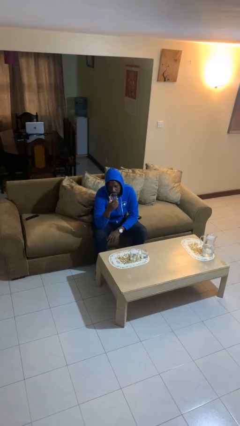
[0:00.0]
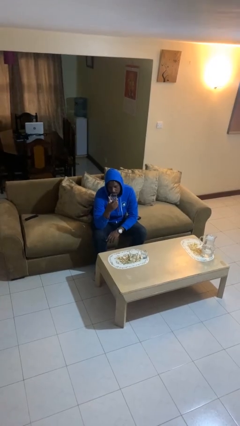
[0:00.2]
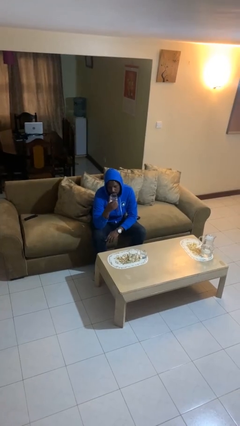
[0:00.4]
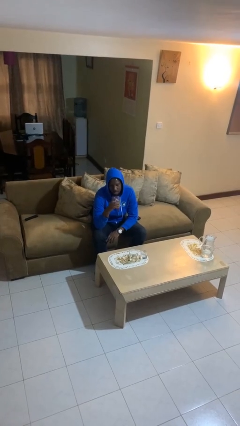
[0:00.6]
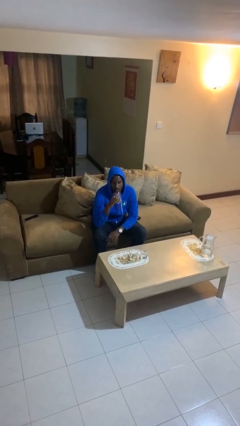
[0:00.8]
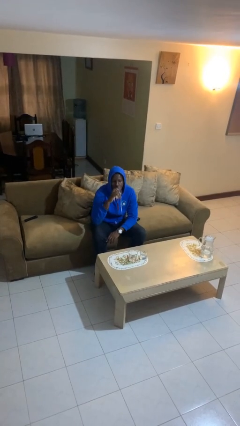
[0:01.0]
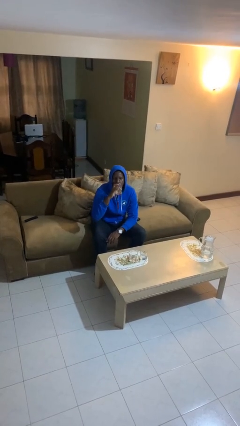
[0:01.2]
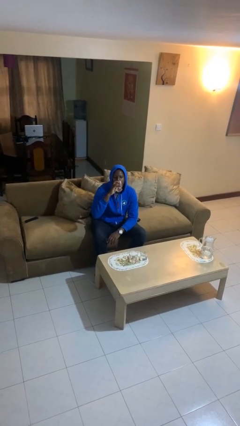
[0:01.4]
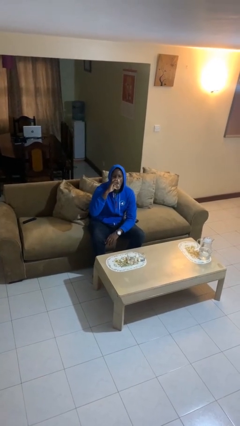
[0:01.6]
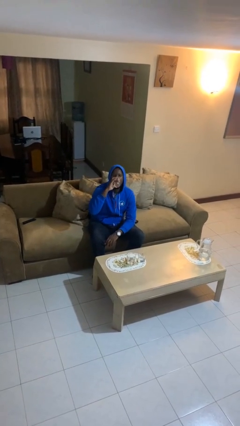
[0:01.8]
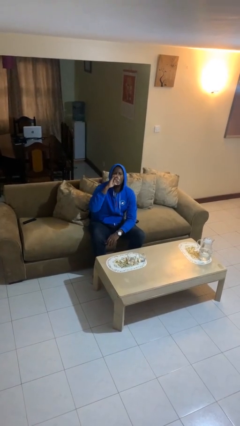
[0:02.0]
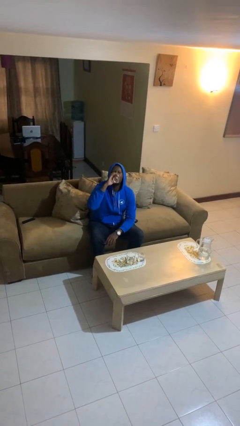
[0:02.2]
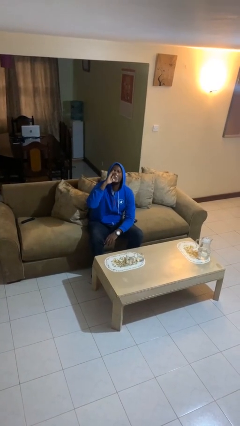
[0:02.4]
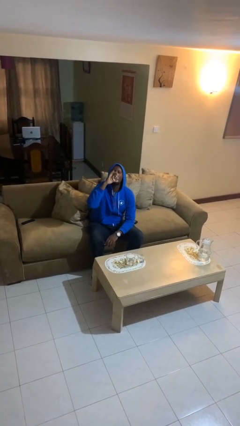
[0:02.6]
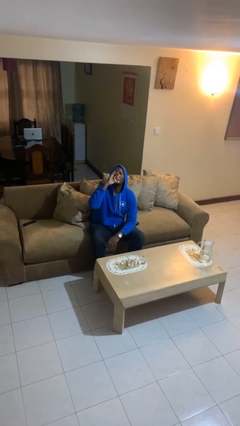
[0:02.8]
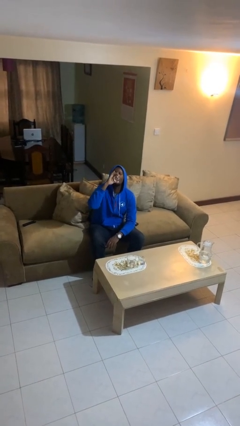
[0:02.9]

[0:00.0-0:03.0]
person drinks from shotglass

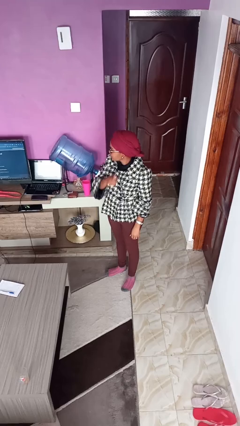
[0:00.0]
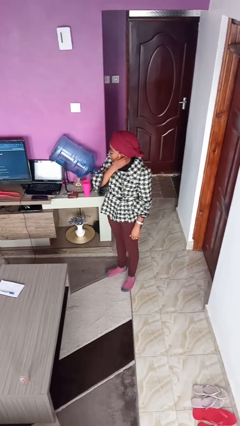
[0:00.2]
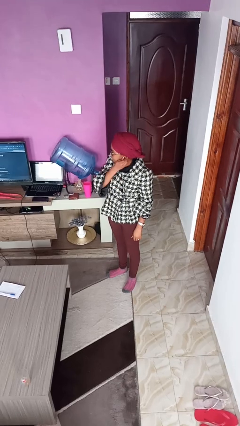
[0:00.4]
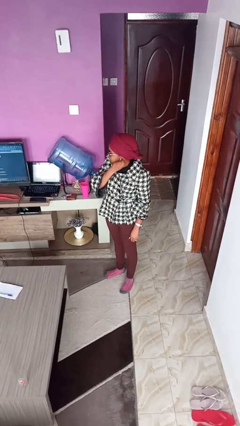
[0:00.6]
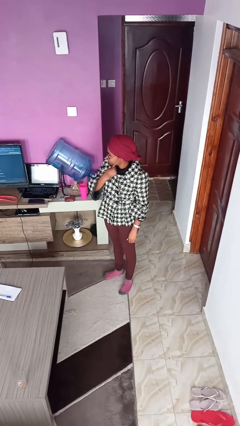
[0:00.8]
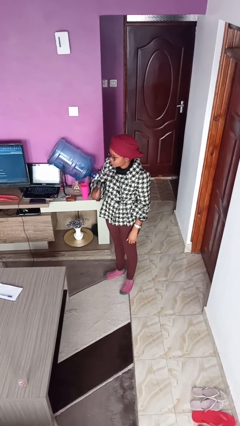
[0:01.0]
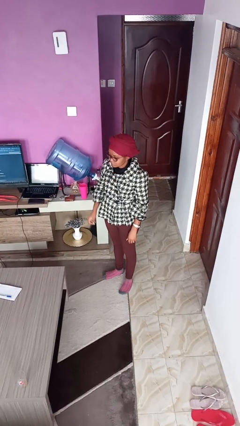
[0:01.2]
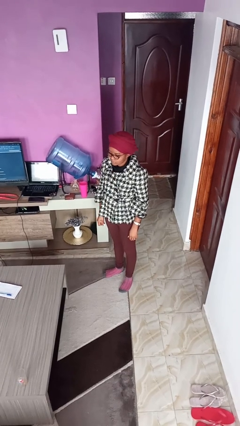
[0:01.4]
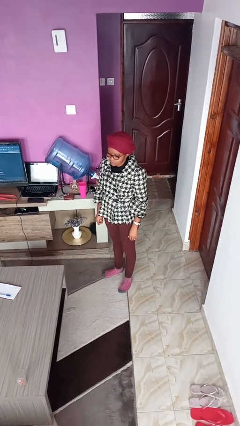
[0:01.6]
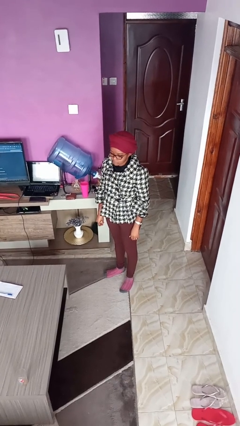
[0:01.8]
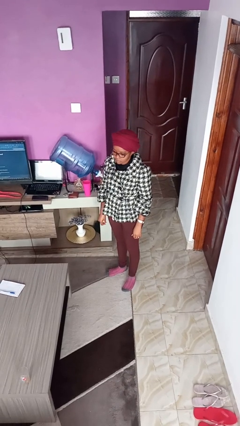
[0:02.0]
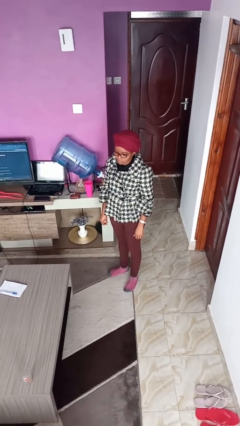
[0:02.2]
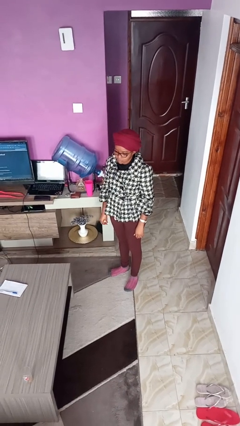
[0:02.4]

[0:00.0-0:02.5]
person takes off earrings

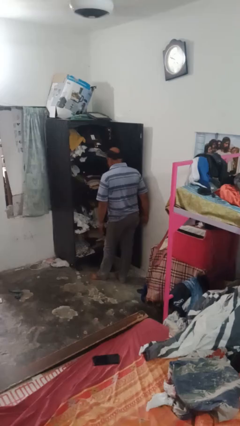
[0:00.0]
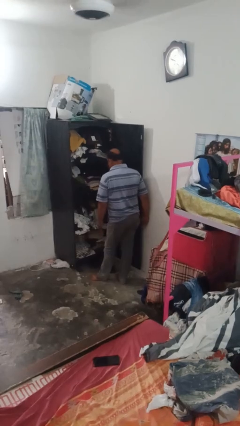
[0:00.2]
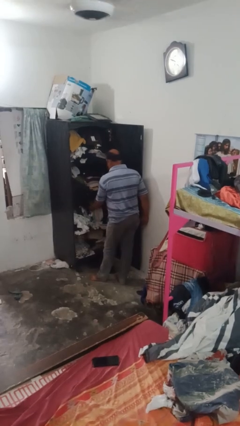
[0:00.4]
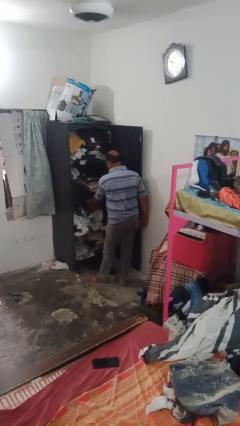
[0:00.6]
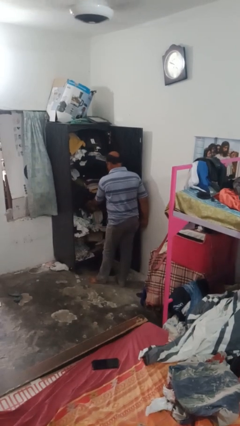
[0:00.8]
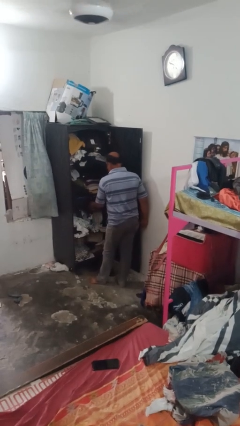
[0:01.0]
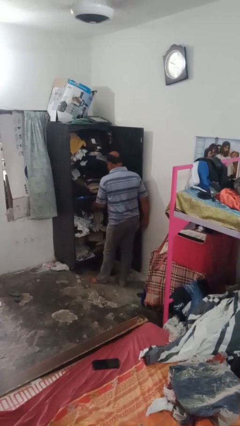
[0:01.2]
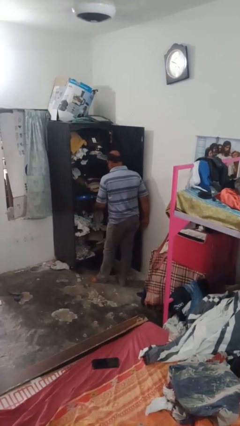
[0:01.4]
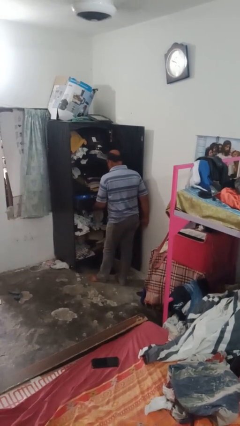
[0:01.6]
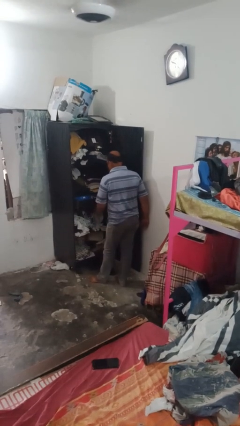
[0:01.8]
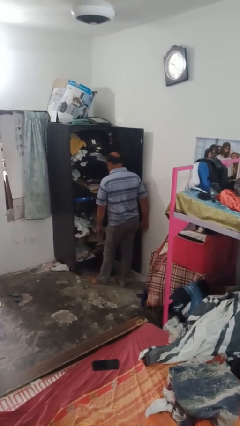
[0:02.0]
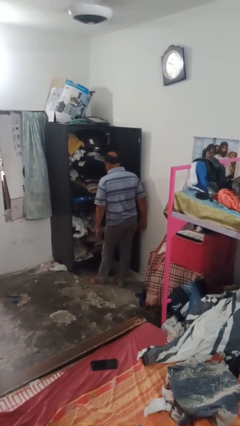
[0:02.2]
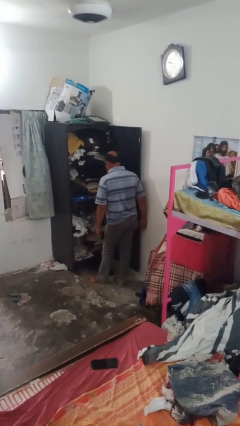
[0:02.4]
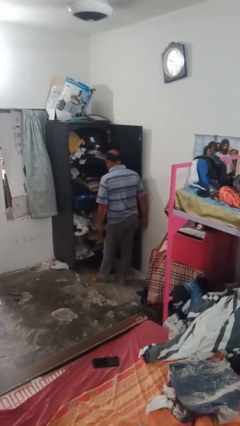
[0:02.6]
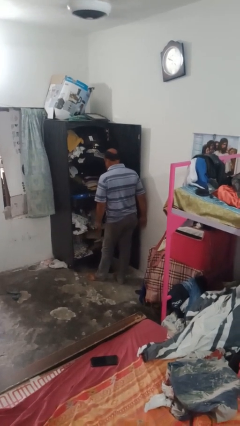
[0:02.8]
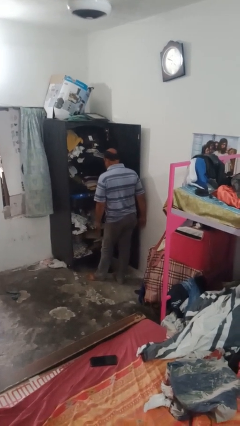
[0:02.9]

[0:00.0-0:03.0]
person opens dresser drawer

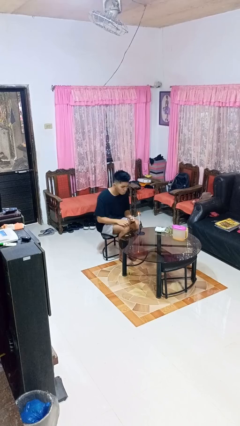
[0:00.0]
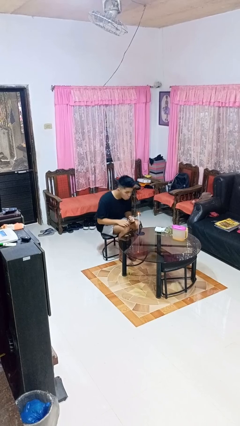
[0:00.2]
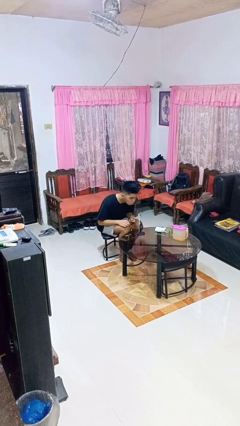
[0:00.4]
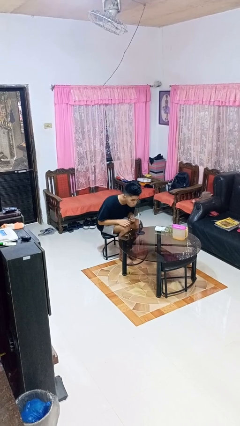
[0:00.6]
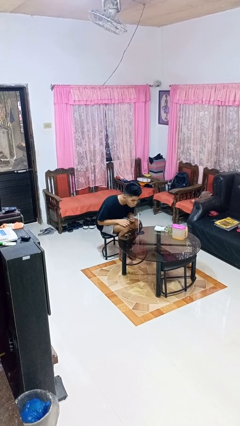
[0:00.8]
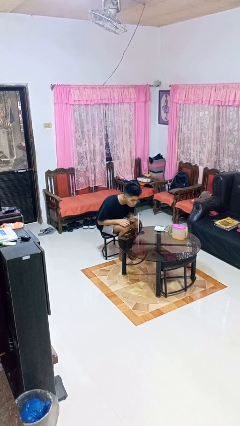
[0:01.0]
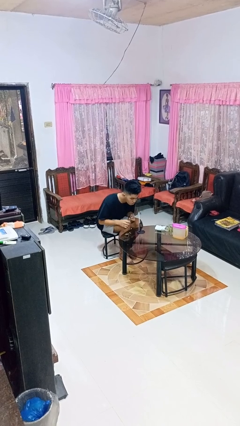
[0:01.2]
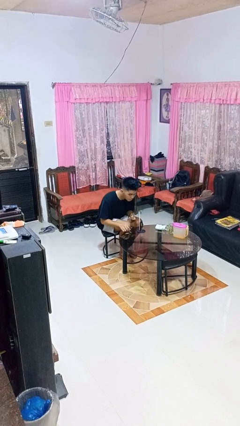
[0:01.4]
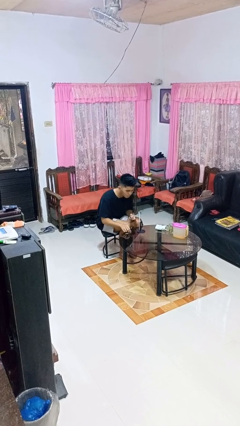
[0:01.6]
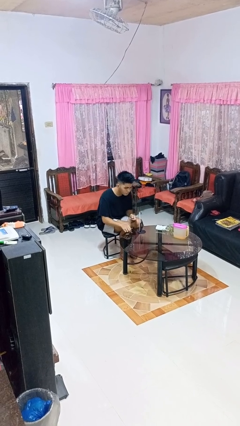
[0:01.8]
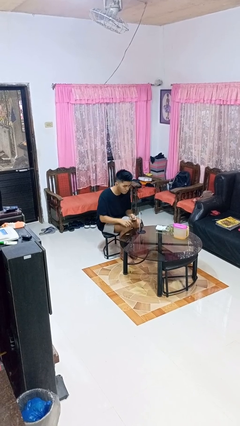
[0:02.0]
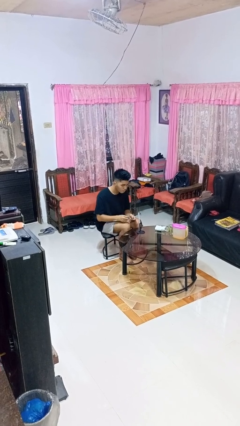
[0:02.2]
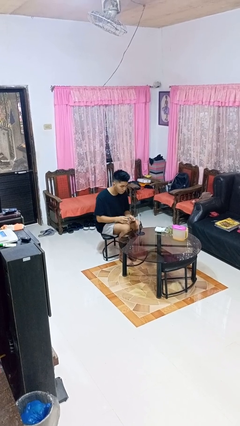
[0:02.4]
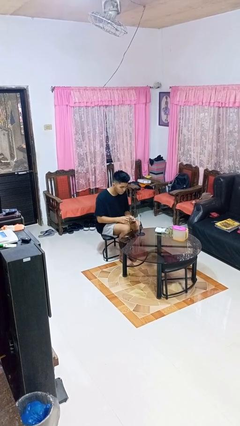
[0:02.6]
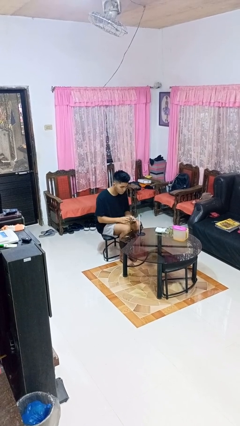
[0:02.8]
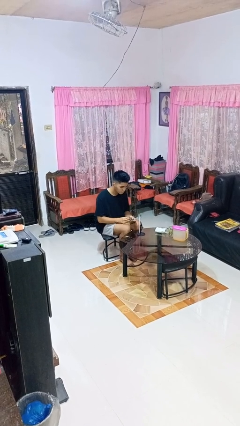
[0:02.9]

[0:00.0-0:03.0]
person extinguishes candle

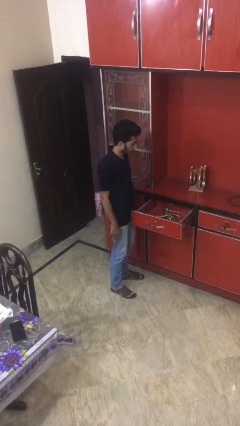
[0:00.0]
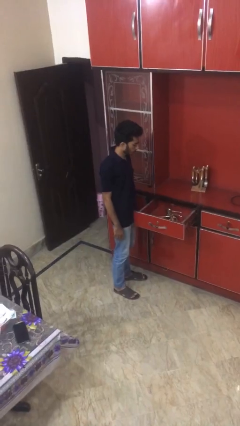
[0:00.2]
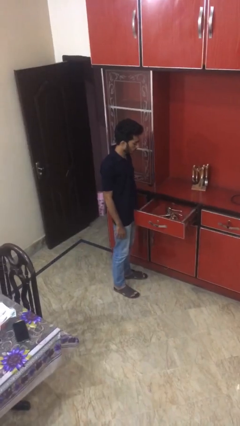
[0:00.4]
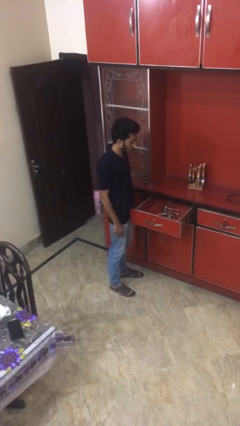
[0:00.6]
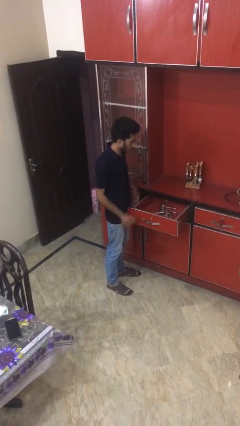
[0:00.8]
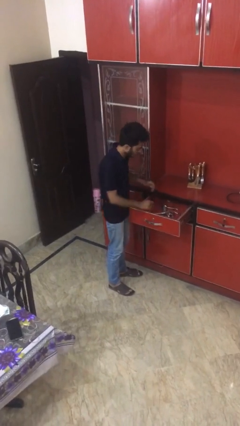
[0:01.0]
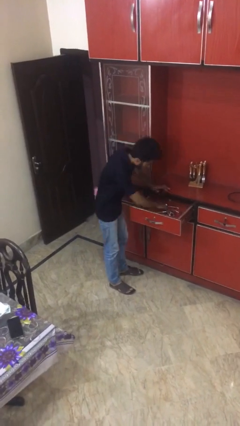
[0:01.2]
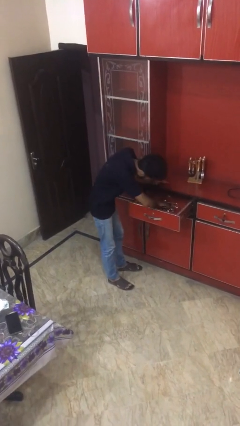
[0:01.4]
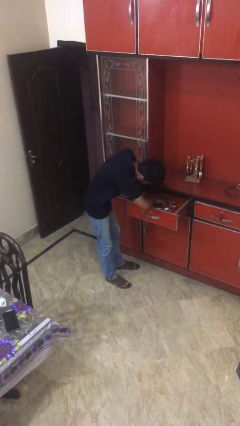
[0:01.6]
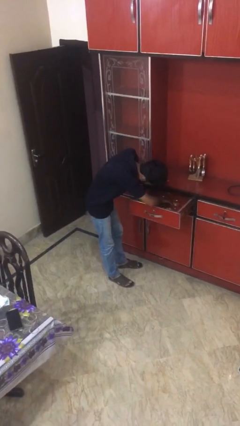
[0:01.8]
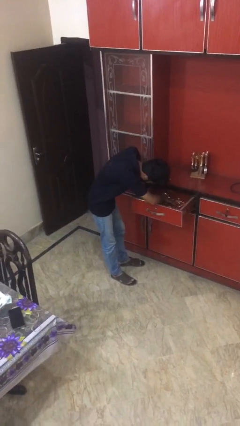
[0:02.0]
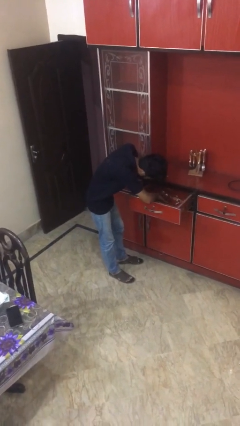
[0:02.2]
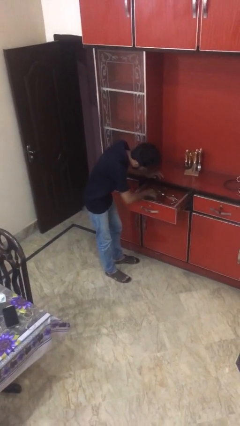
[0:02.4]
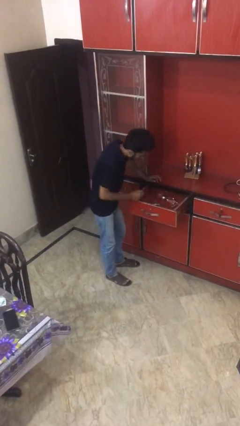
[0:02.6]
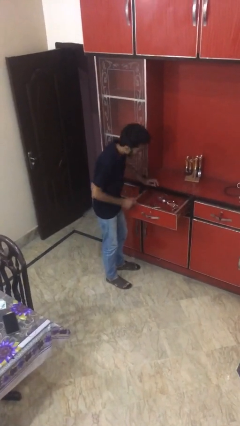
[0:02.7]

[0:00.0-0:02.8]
person searches in kitchen drawer

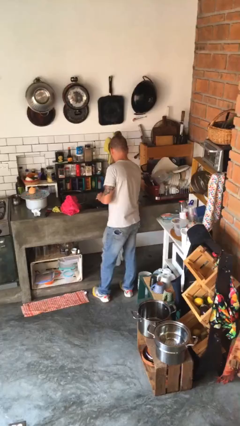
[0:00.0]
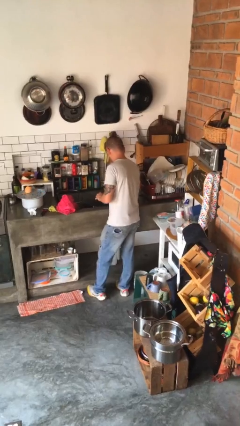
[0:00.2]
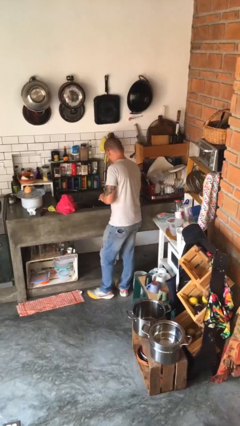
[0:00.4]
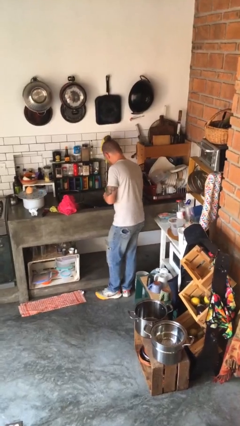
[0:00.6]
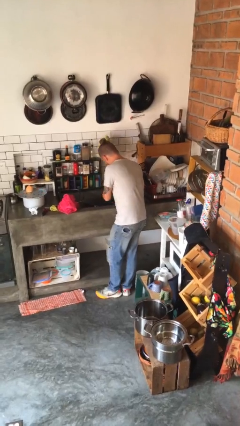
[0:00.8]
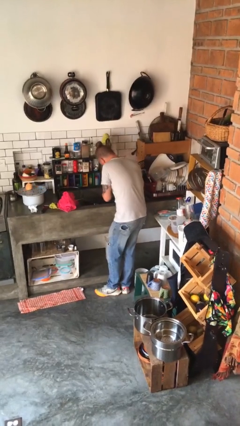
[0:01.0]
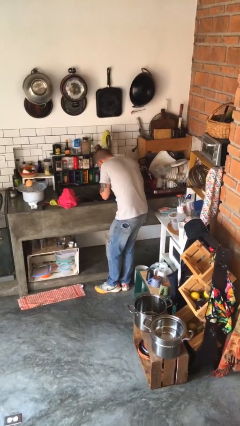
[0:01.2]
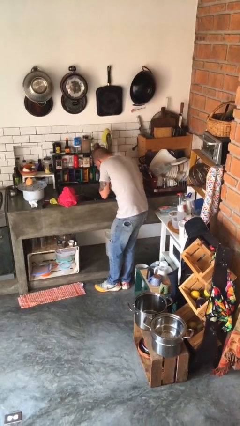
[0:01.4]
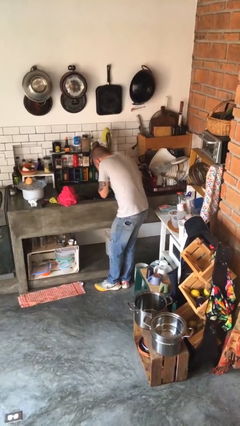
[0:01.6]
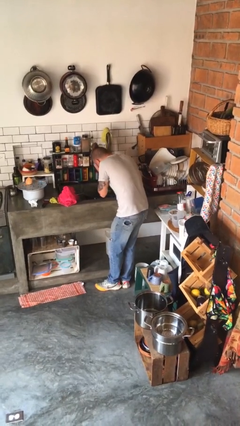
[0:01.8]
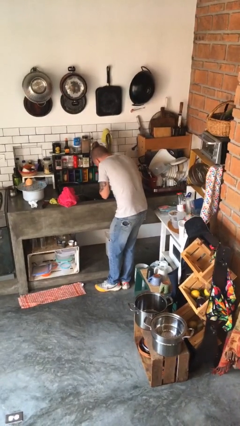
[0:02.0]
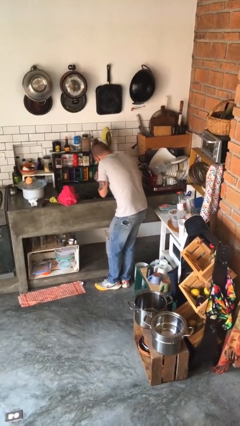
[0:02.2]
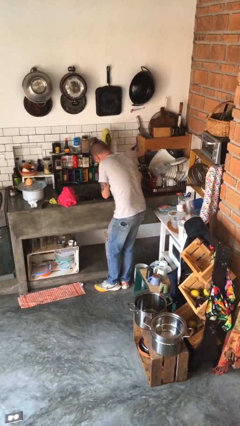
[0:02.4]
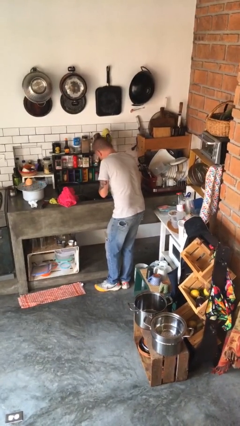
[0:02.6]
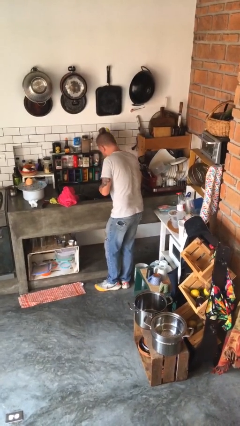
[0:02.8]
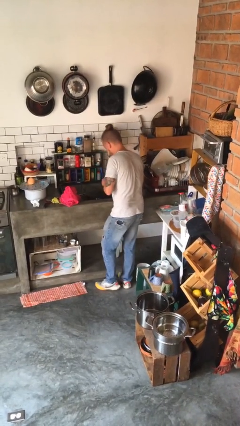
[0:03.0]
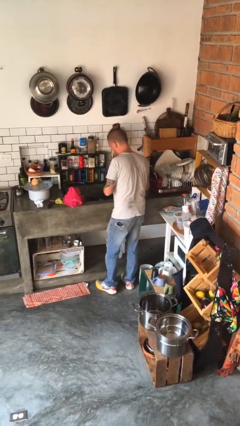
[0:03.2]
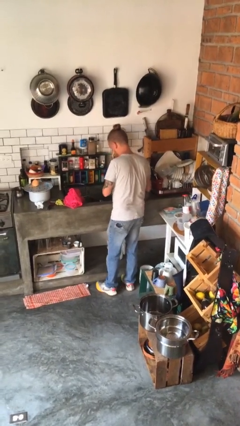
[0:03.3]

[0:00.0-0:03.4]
person washes face
